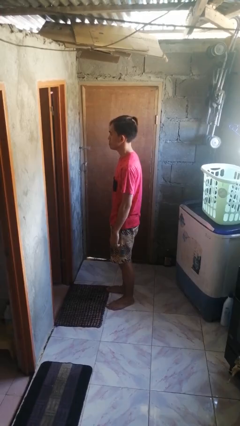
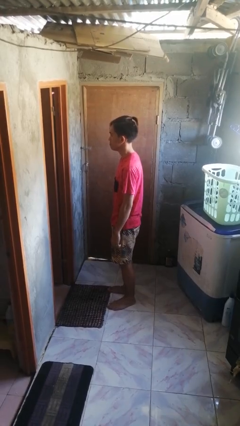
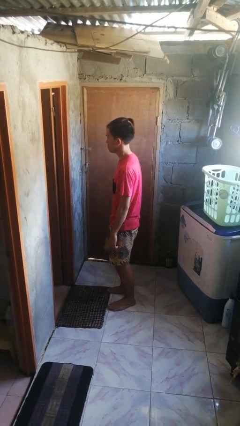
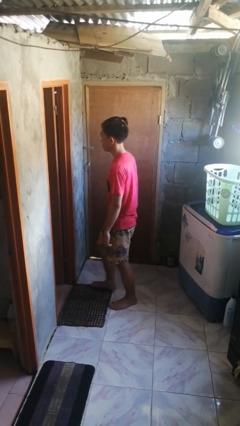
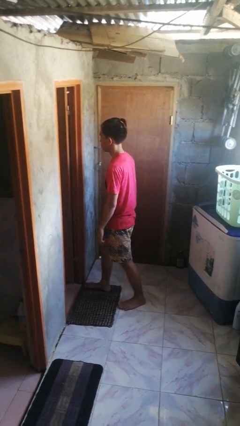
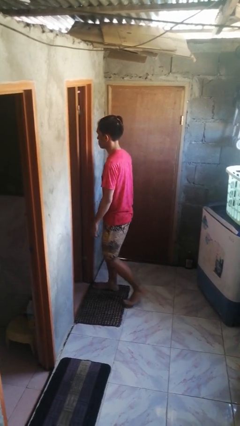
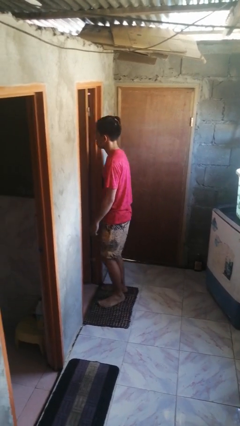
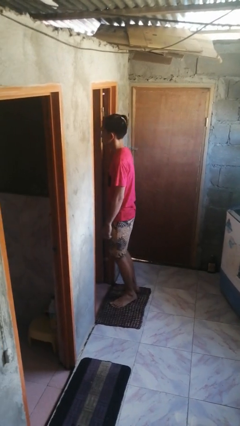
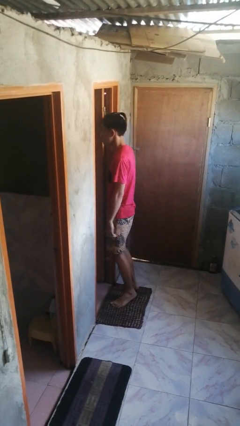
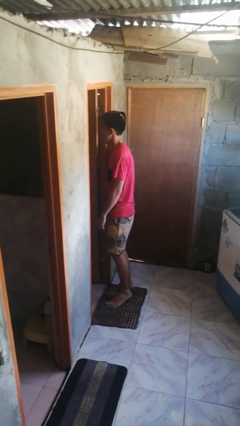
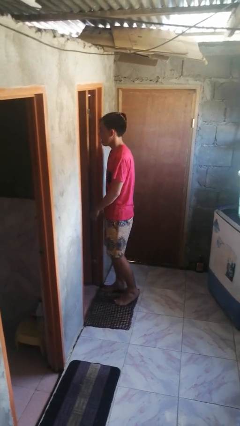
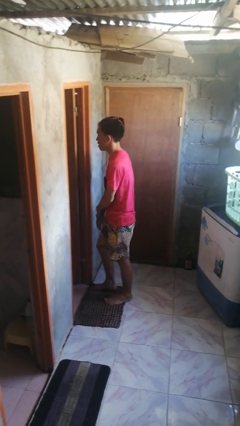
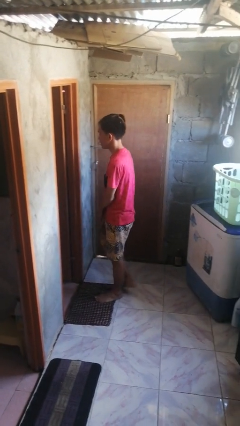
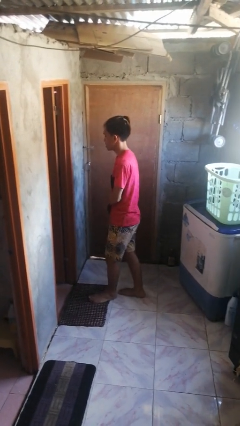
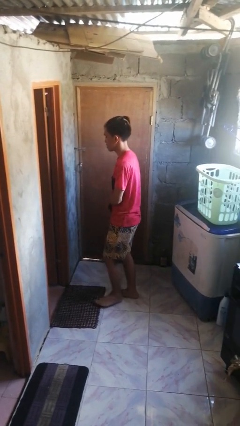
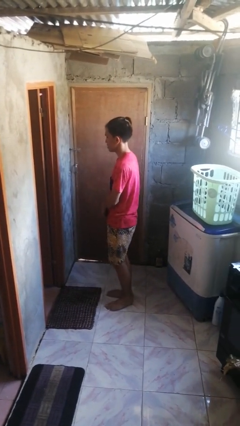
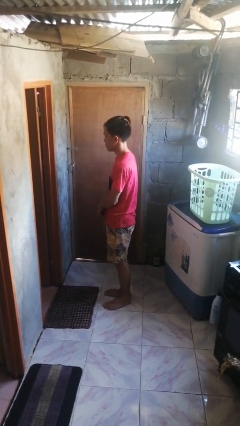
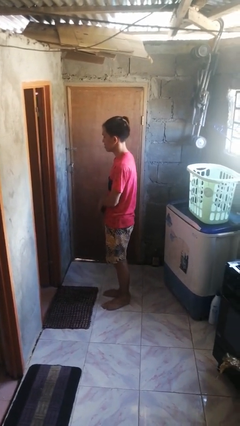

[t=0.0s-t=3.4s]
person bumps into wall

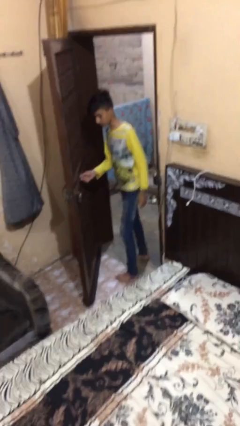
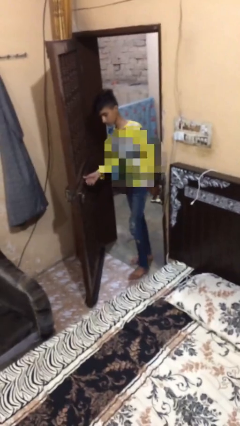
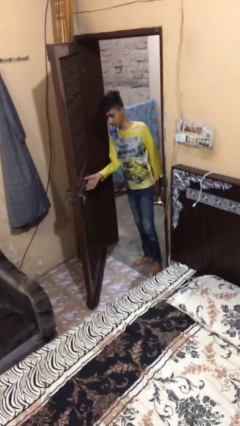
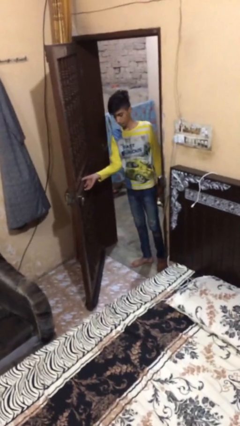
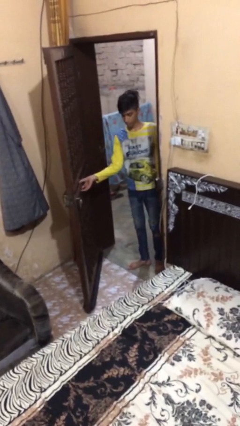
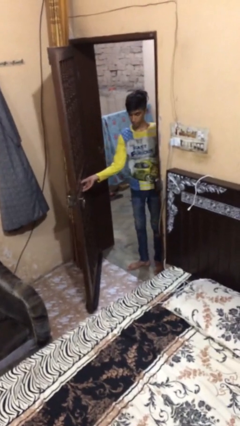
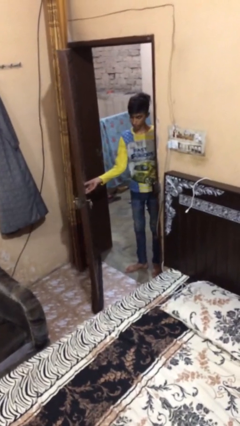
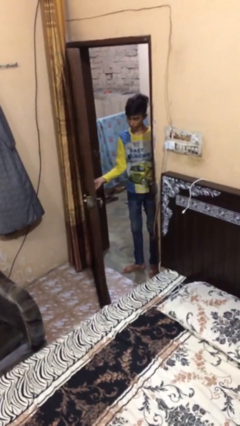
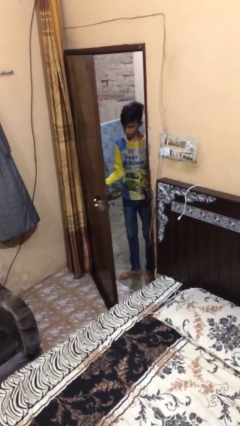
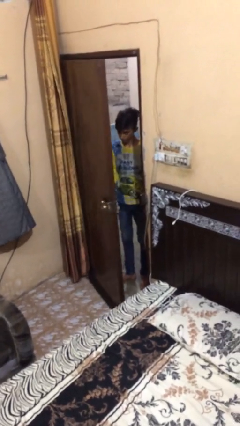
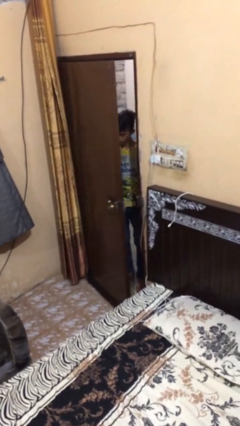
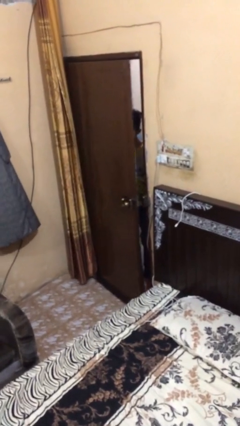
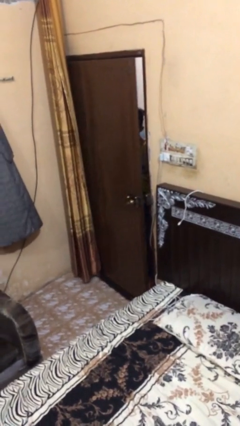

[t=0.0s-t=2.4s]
person closes facility door

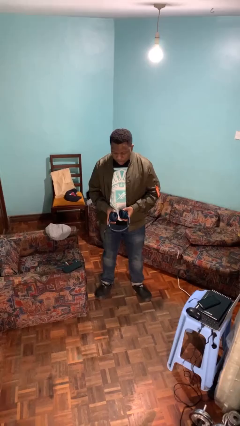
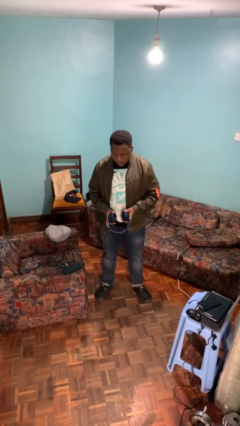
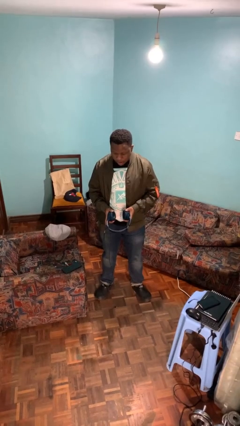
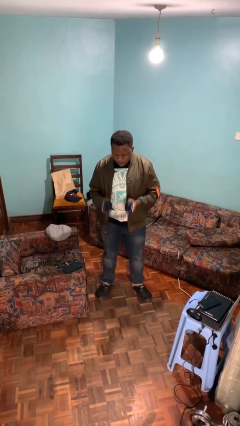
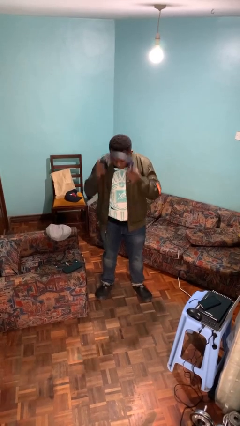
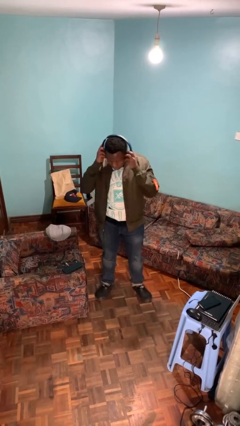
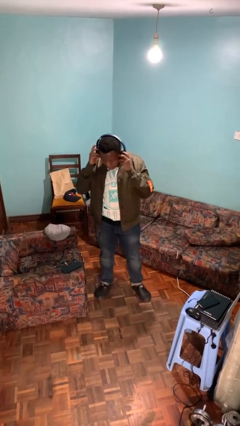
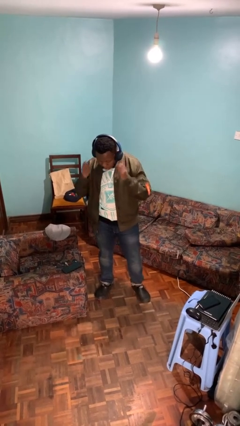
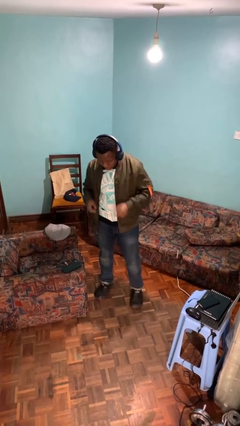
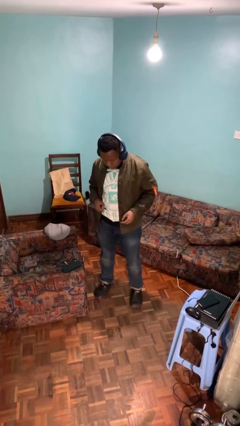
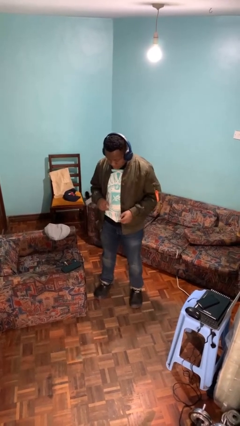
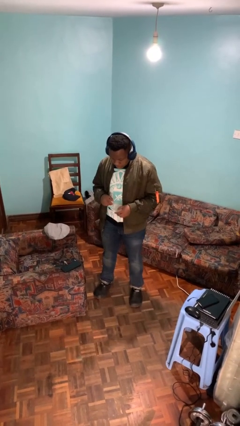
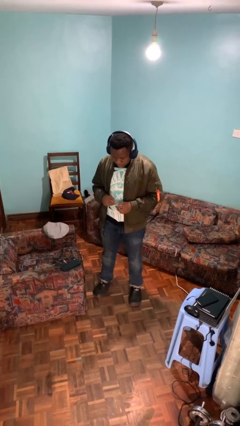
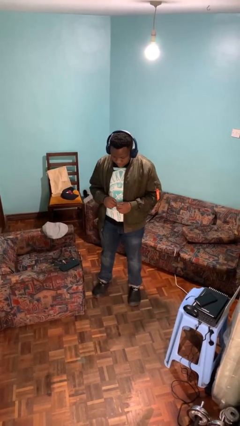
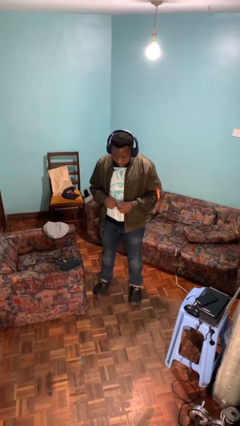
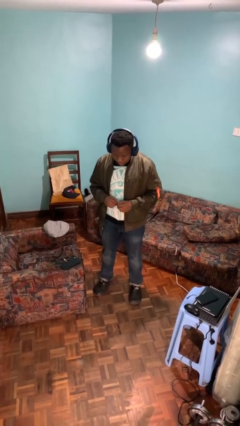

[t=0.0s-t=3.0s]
person puts on headphones

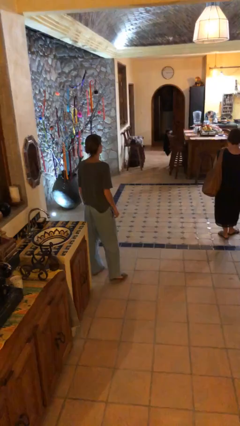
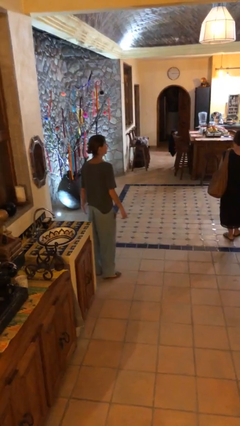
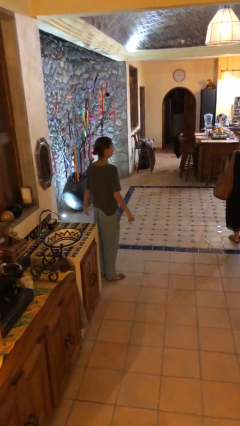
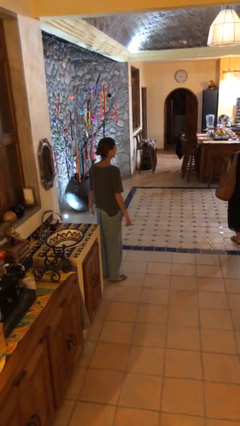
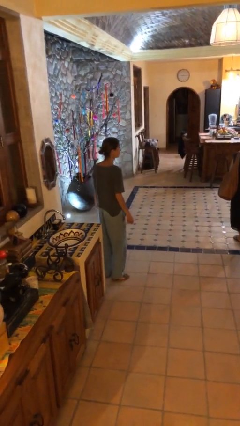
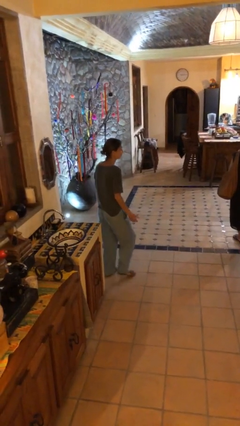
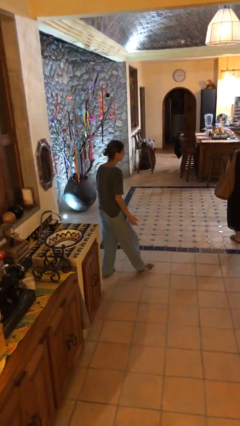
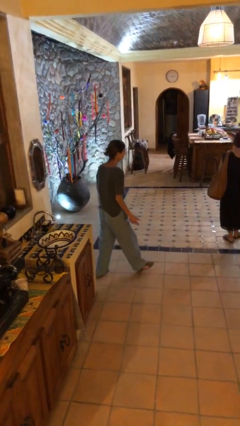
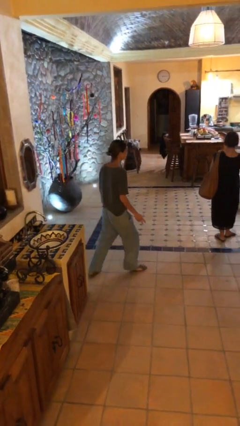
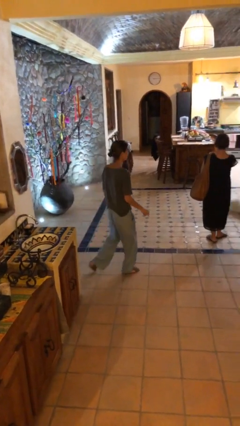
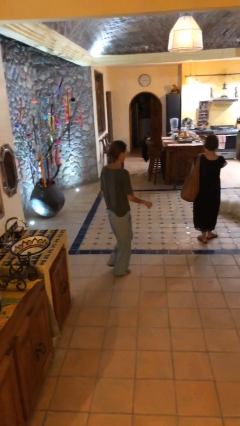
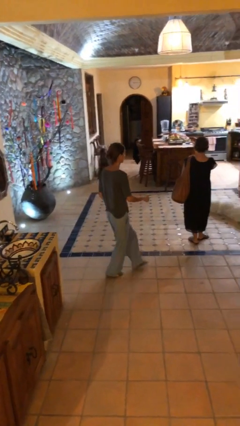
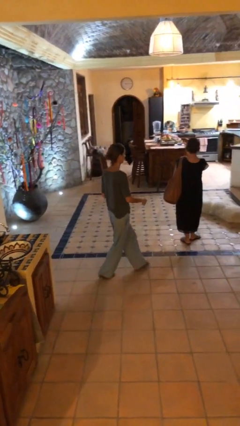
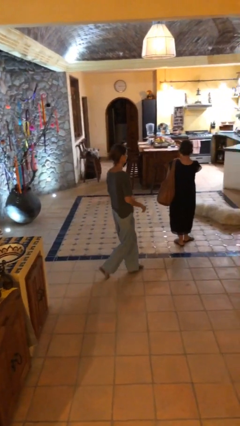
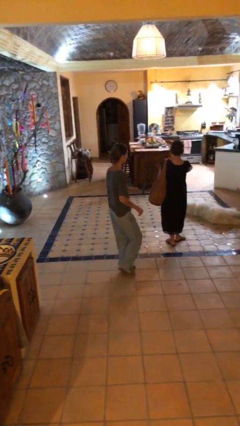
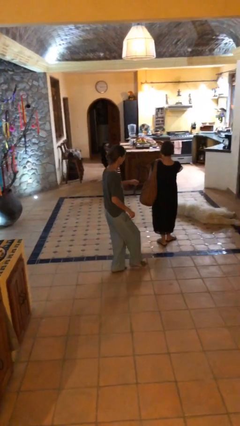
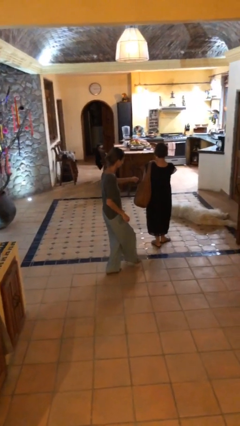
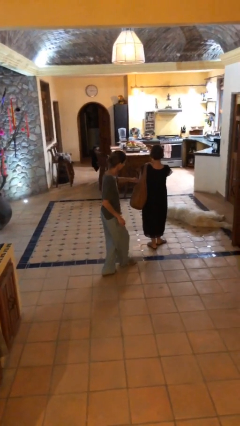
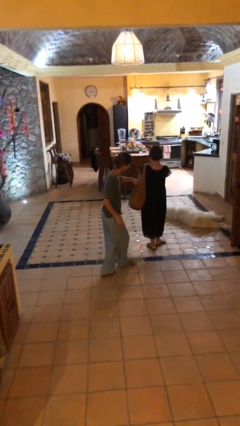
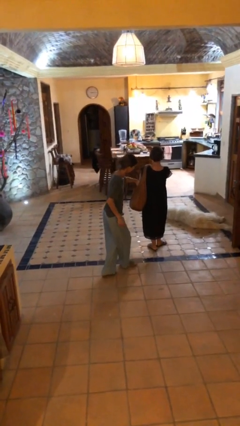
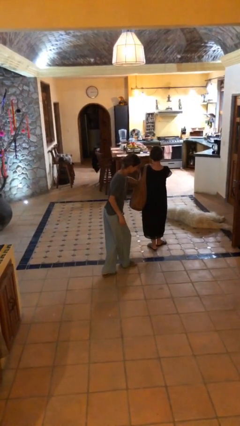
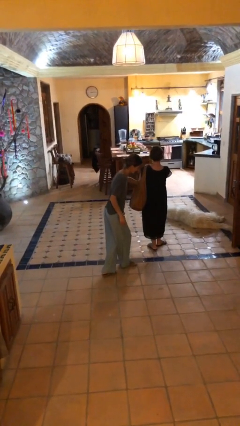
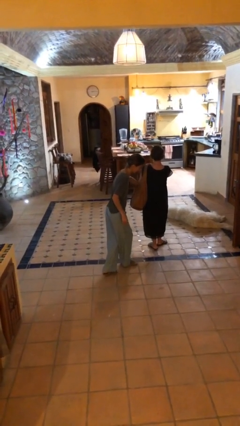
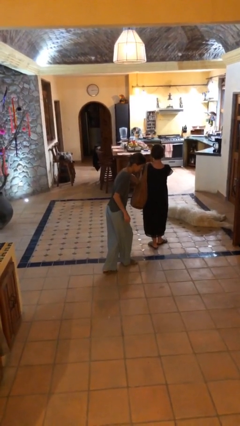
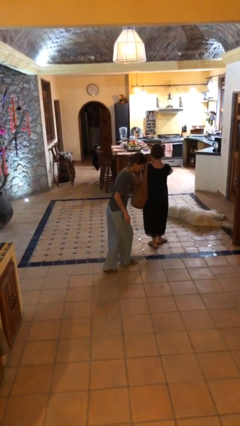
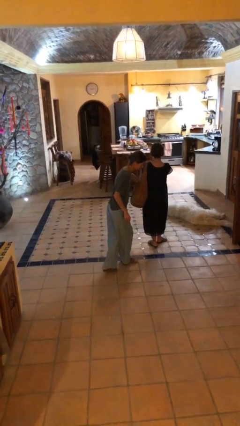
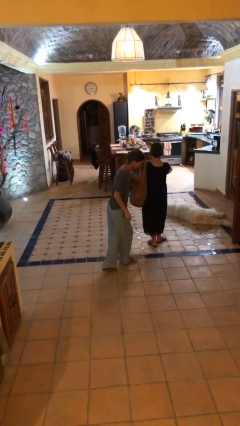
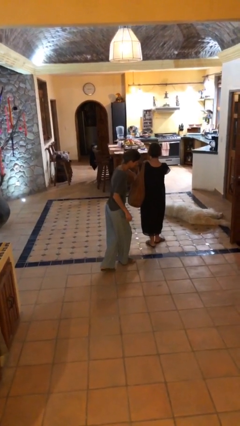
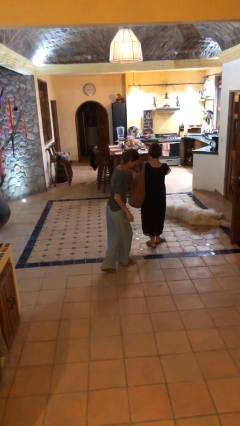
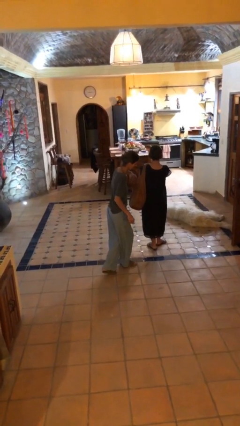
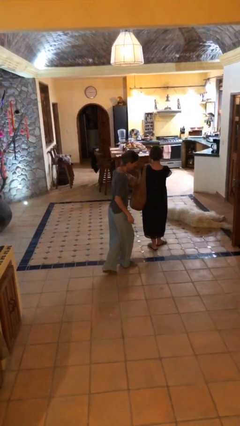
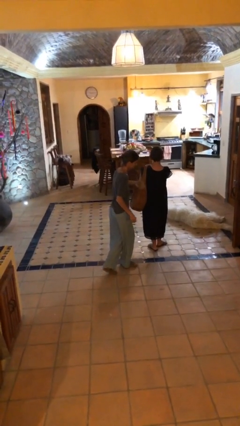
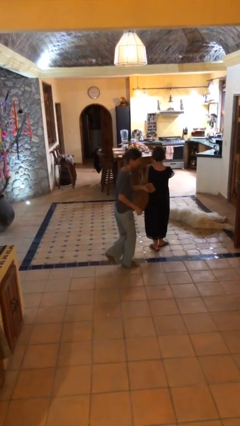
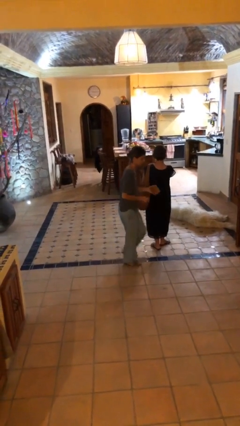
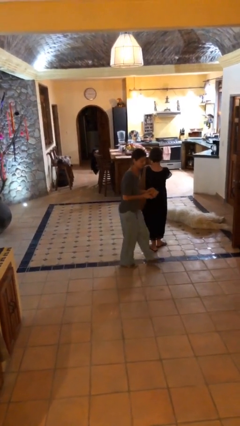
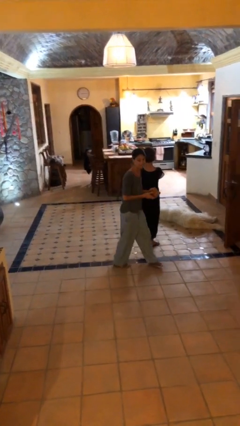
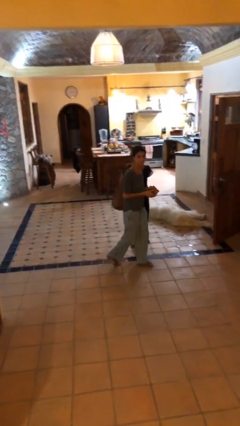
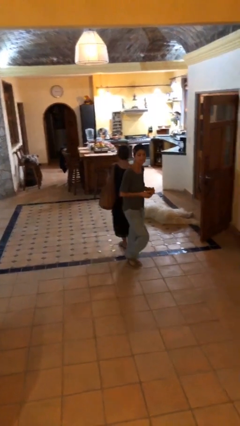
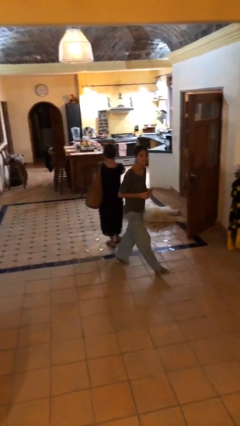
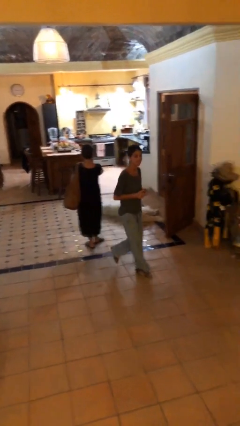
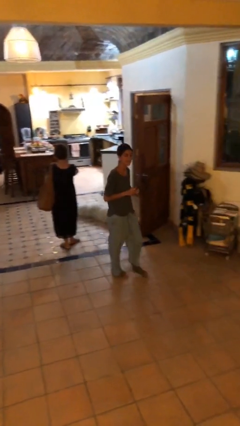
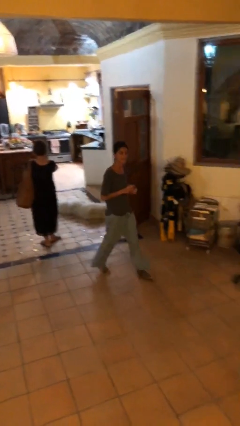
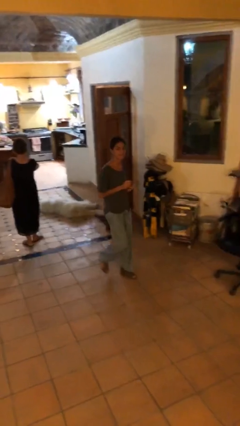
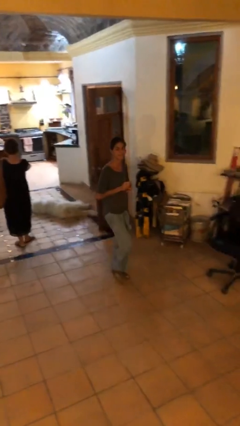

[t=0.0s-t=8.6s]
person steals object from person

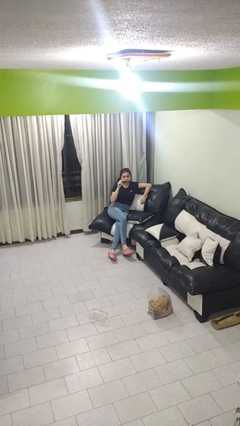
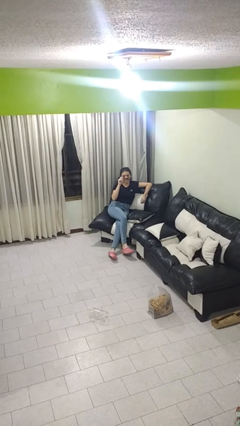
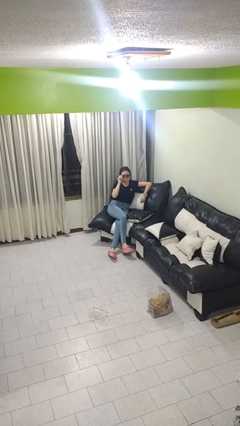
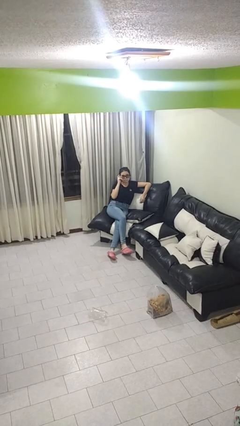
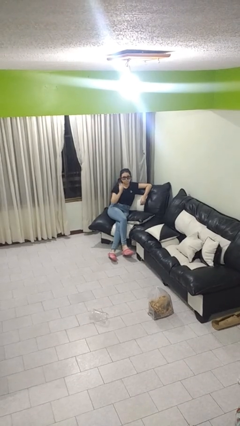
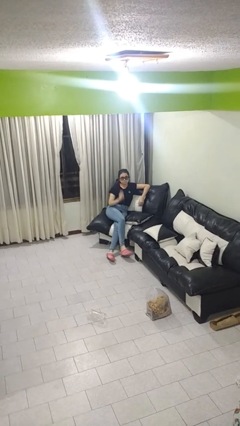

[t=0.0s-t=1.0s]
person puts on sunglasses
